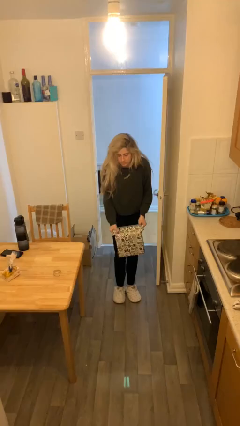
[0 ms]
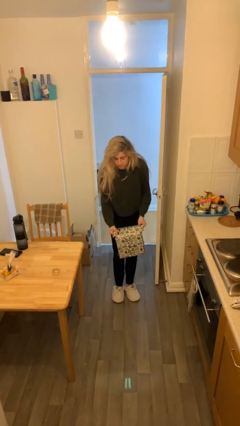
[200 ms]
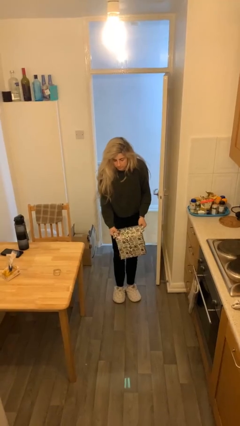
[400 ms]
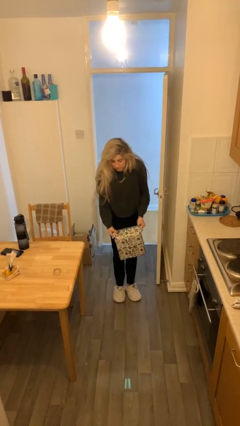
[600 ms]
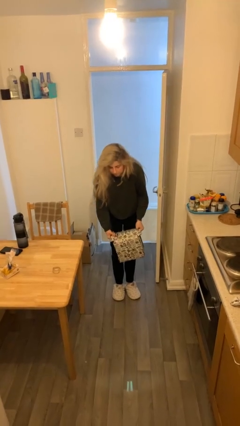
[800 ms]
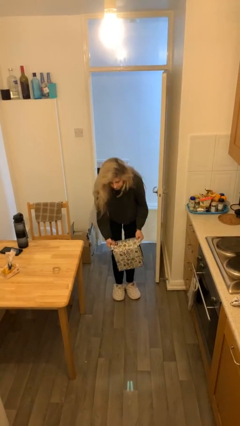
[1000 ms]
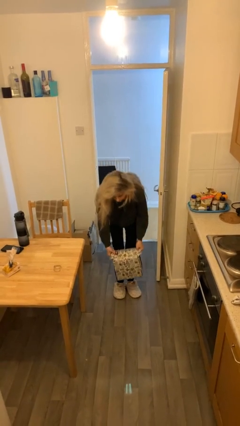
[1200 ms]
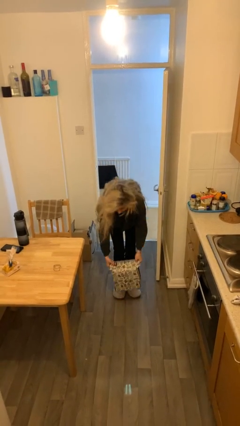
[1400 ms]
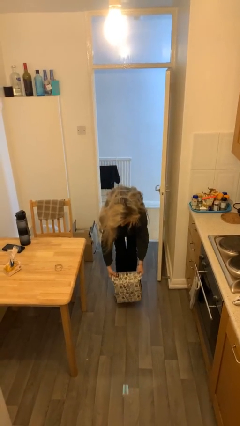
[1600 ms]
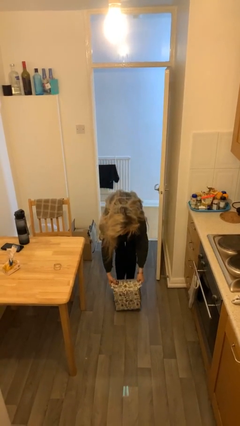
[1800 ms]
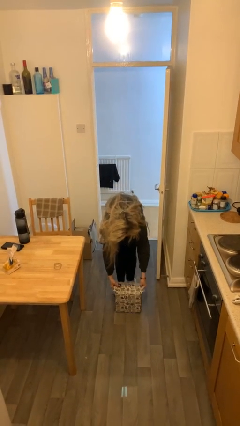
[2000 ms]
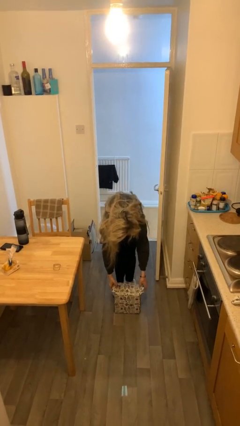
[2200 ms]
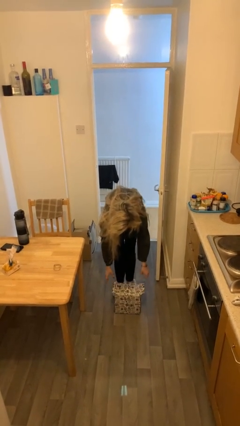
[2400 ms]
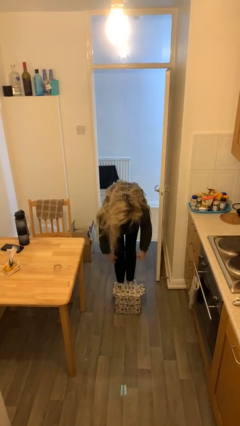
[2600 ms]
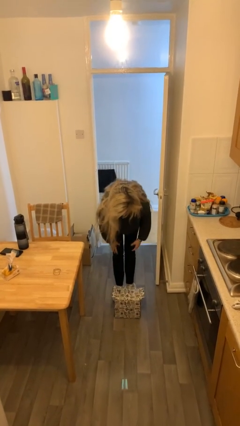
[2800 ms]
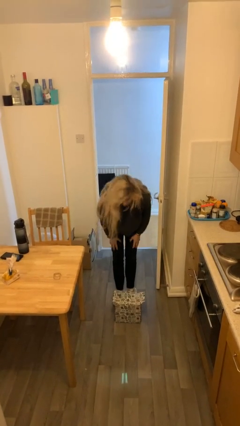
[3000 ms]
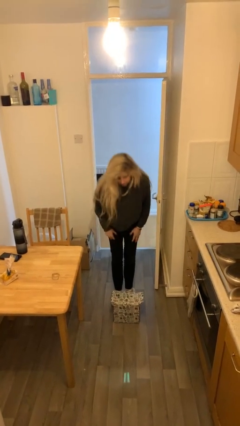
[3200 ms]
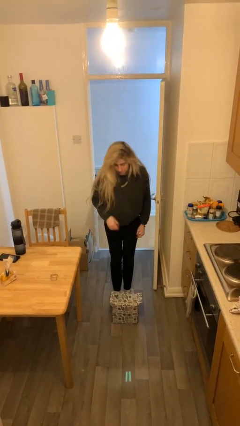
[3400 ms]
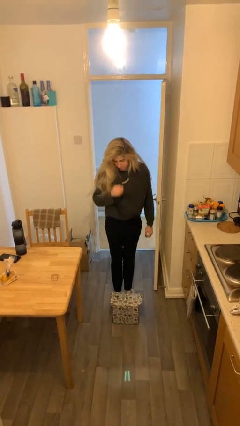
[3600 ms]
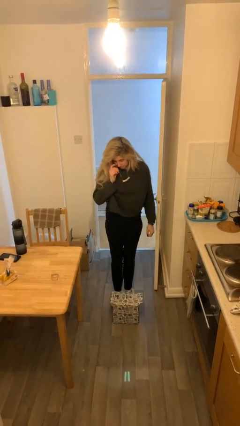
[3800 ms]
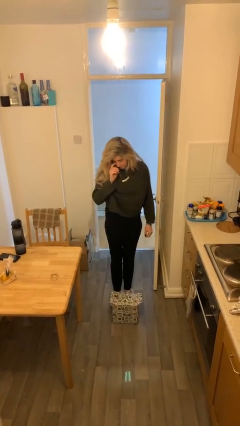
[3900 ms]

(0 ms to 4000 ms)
person puts down object on floor

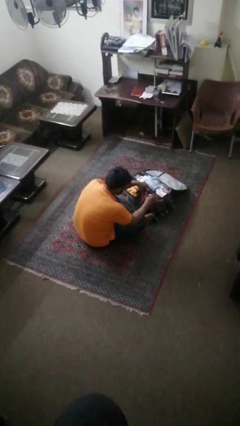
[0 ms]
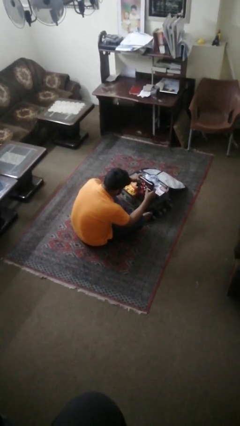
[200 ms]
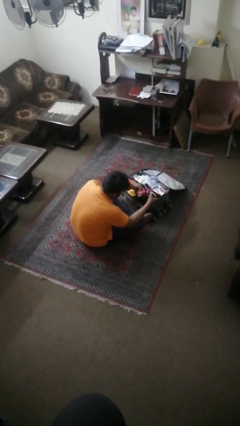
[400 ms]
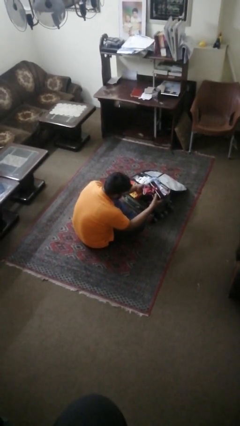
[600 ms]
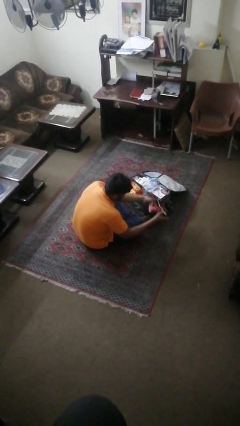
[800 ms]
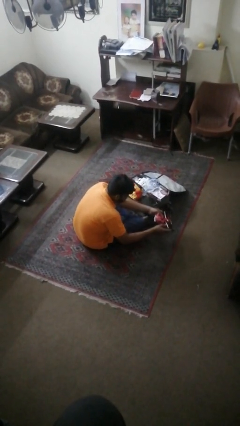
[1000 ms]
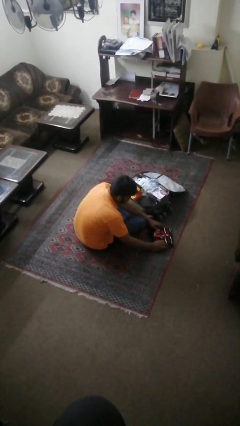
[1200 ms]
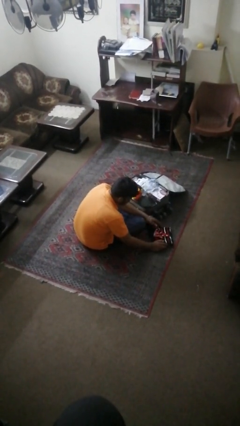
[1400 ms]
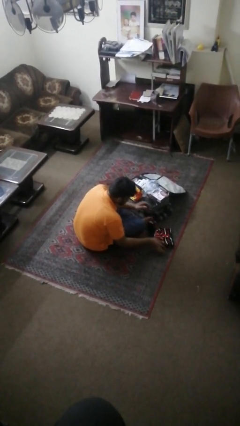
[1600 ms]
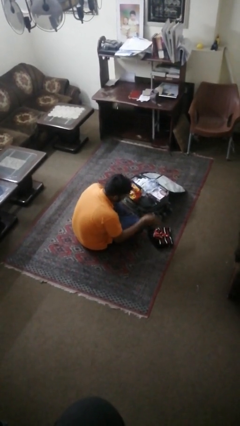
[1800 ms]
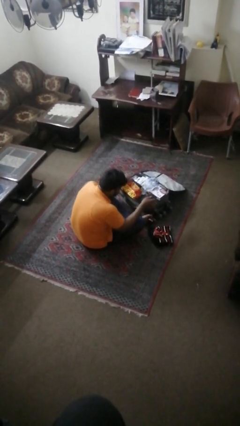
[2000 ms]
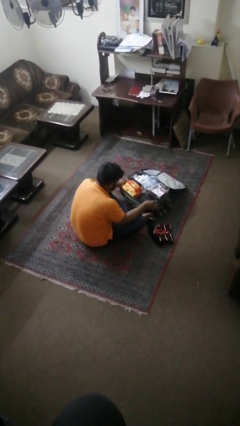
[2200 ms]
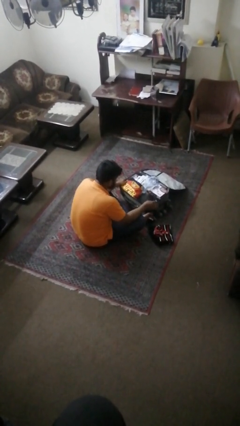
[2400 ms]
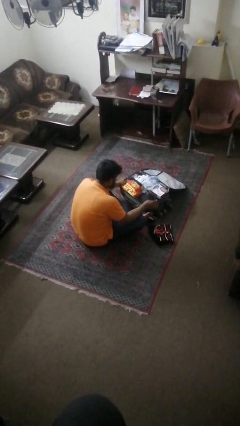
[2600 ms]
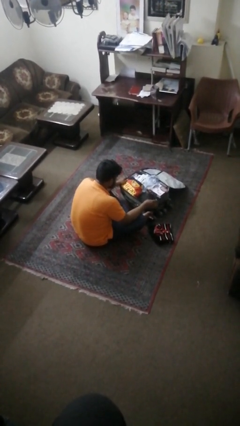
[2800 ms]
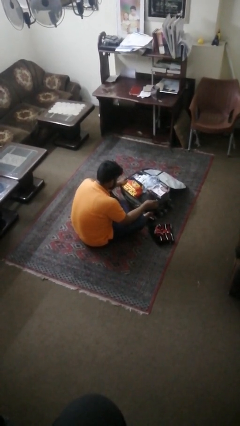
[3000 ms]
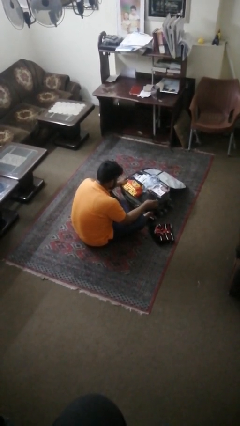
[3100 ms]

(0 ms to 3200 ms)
person unloads clothes from suitcase

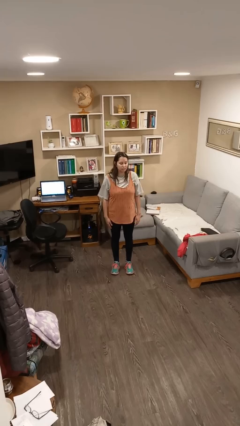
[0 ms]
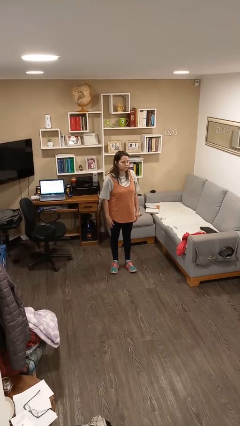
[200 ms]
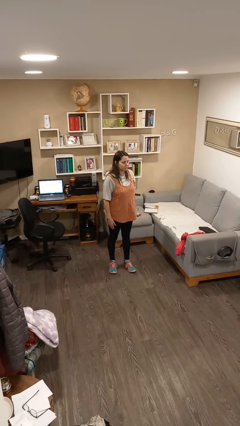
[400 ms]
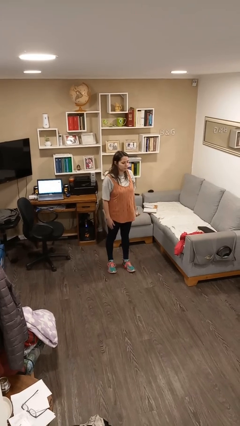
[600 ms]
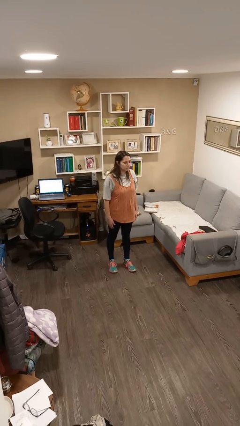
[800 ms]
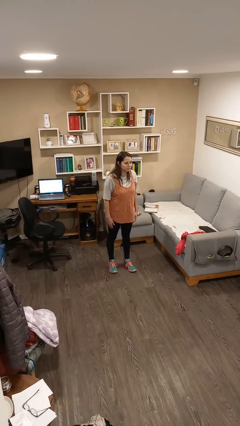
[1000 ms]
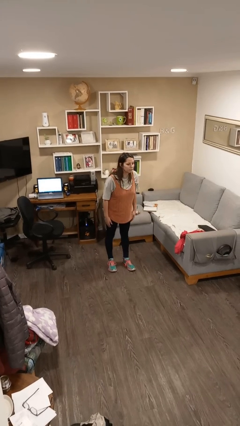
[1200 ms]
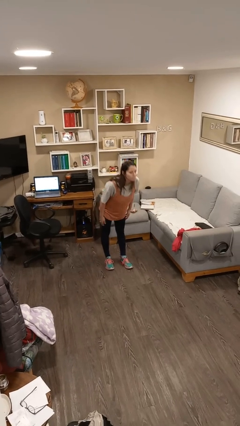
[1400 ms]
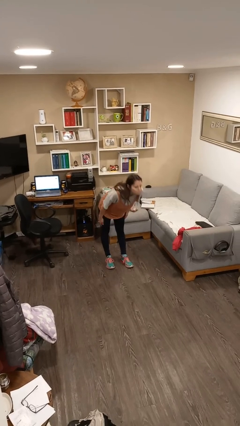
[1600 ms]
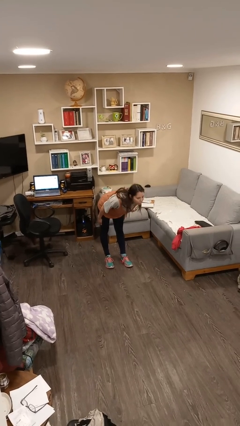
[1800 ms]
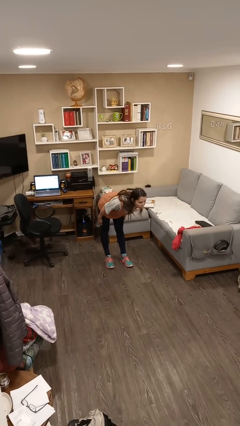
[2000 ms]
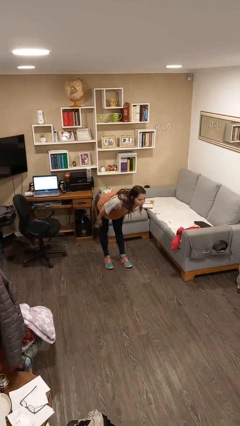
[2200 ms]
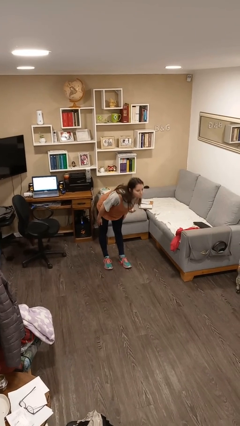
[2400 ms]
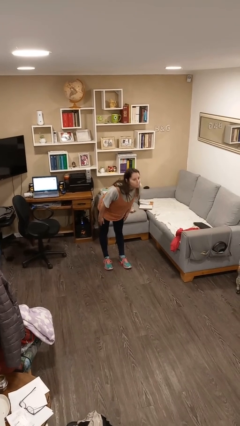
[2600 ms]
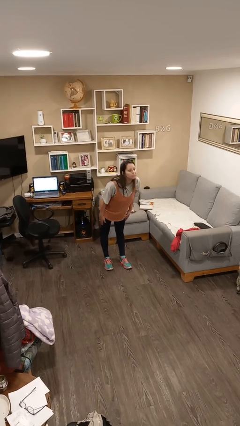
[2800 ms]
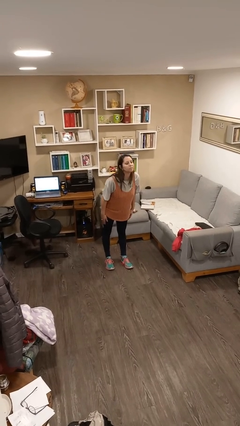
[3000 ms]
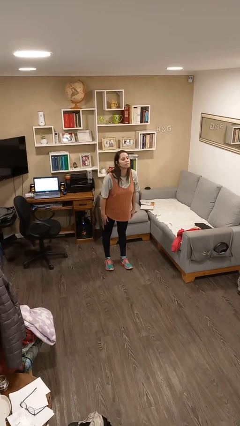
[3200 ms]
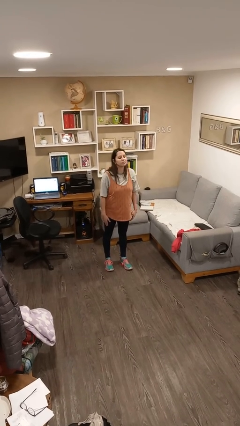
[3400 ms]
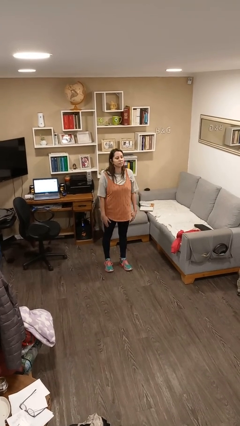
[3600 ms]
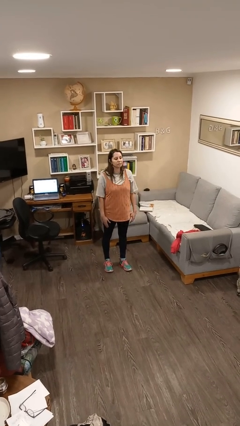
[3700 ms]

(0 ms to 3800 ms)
person bows

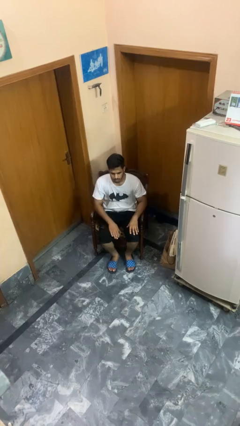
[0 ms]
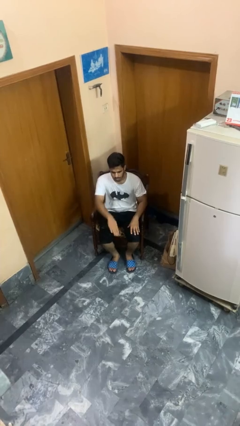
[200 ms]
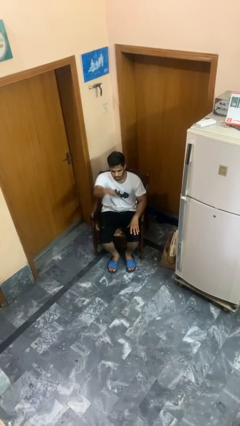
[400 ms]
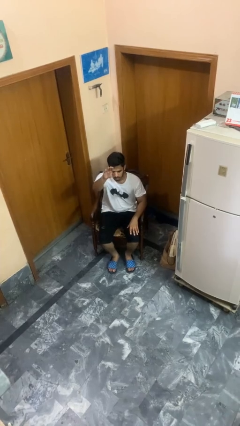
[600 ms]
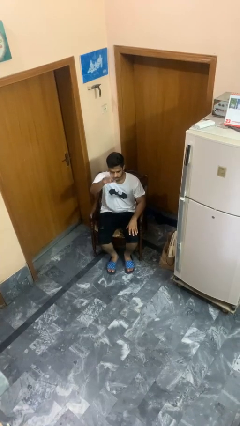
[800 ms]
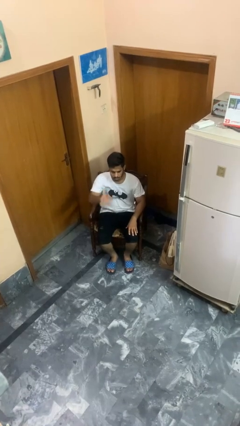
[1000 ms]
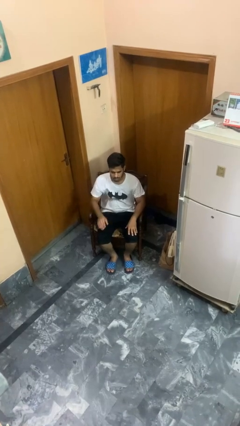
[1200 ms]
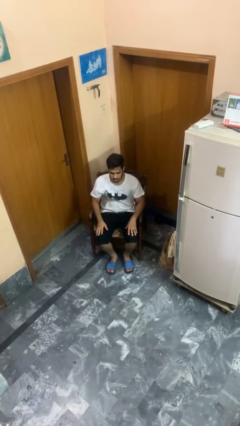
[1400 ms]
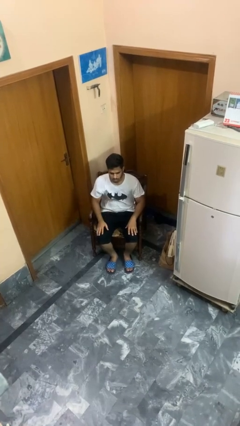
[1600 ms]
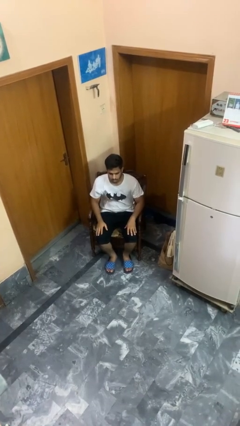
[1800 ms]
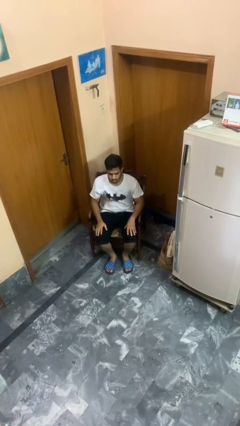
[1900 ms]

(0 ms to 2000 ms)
person gestures swipe up

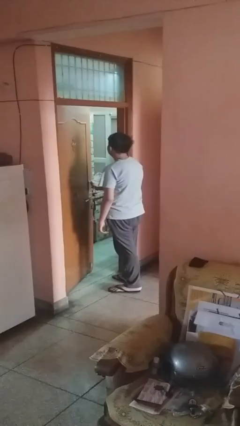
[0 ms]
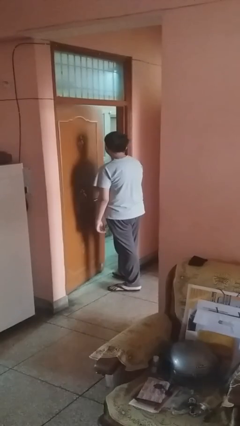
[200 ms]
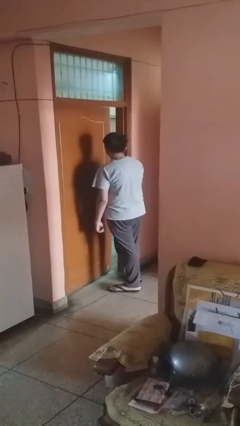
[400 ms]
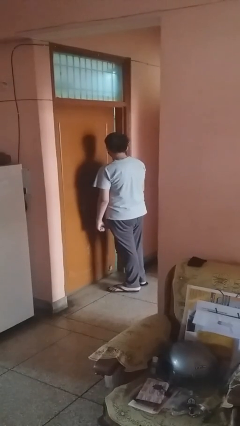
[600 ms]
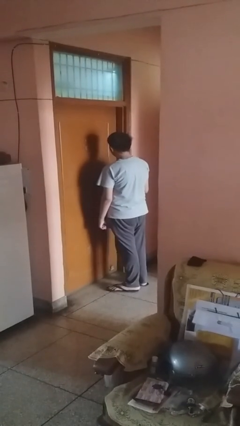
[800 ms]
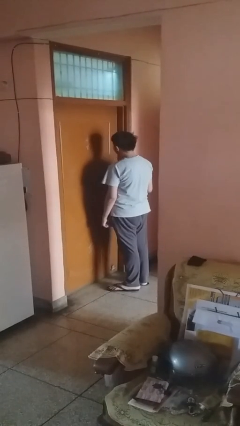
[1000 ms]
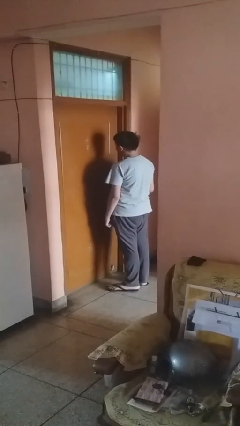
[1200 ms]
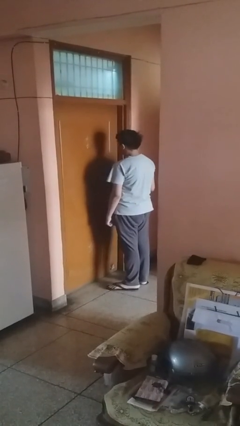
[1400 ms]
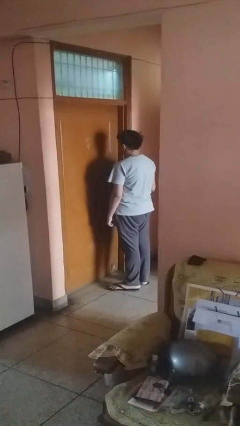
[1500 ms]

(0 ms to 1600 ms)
person closes facility door

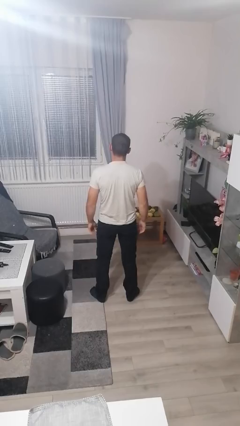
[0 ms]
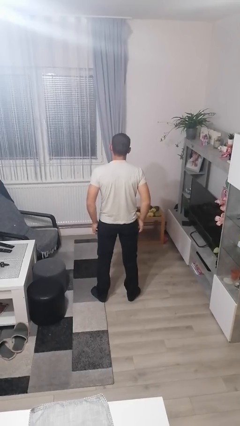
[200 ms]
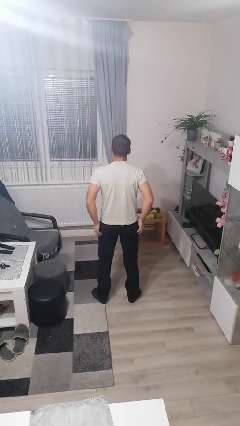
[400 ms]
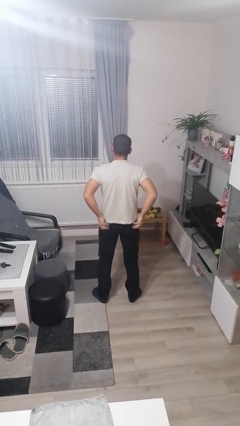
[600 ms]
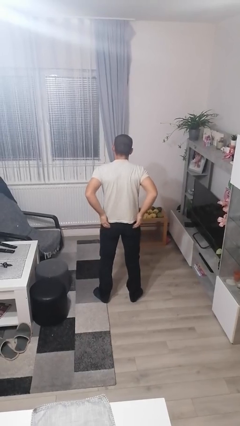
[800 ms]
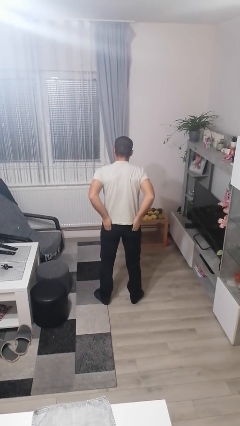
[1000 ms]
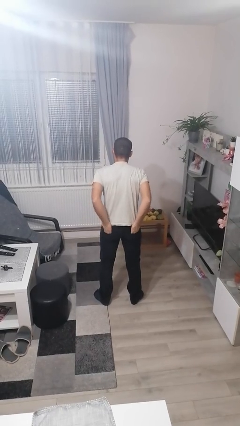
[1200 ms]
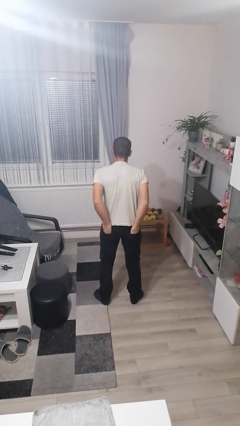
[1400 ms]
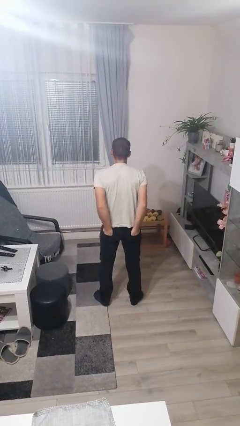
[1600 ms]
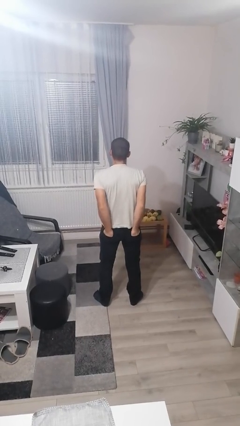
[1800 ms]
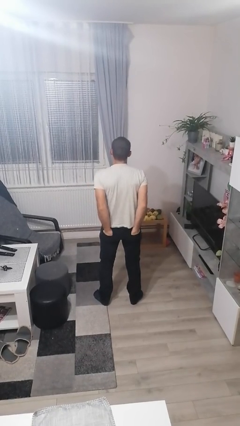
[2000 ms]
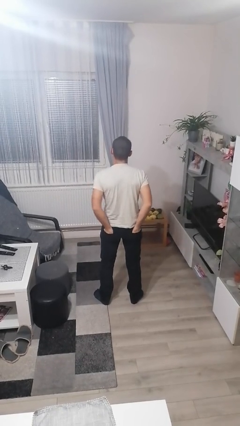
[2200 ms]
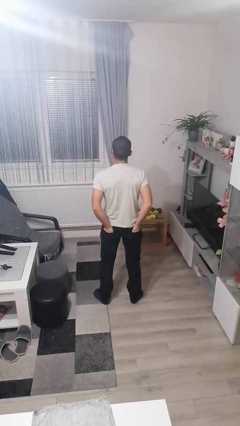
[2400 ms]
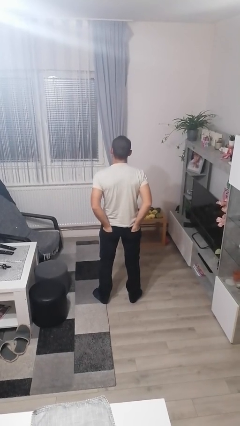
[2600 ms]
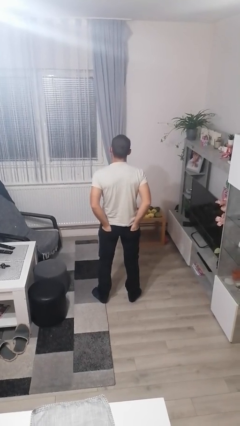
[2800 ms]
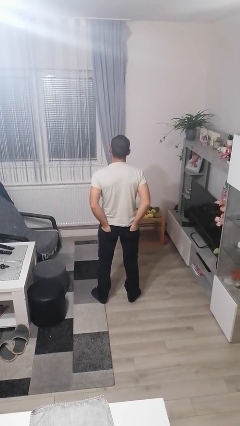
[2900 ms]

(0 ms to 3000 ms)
person puts hands in back pockets
